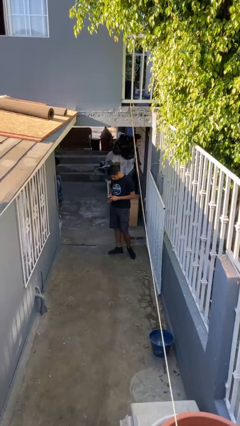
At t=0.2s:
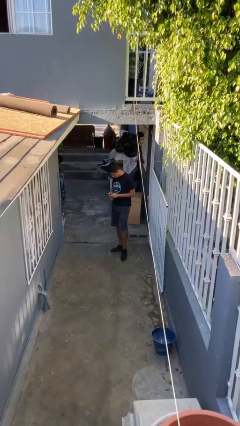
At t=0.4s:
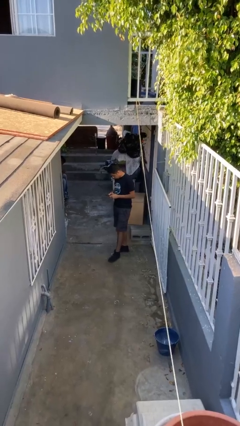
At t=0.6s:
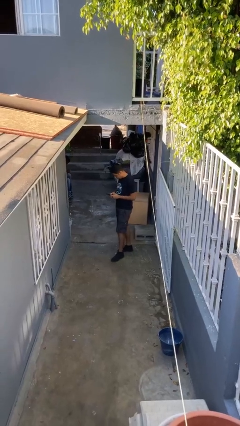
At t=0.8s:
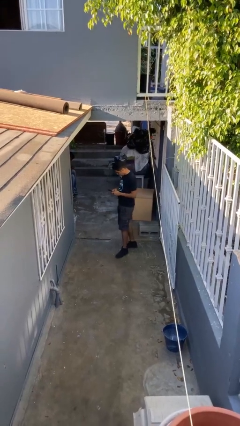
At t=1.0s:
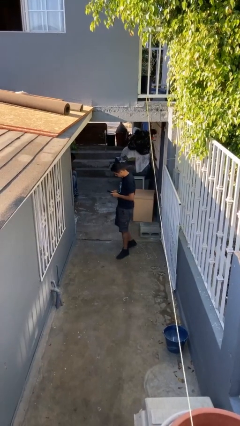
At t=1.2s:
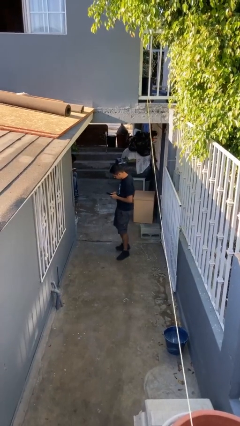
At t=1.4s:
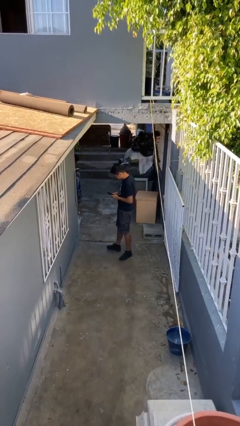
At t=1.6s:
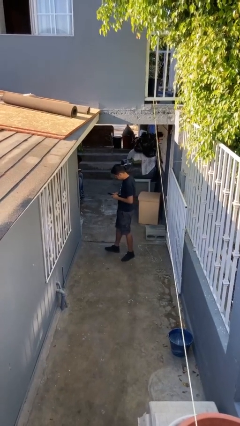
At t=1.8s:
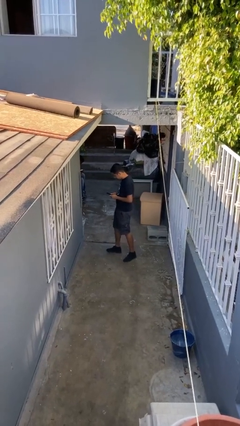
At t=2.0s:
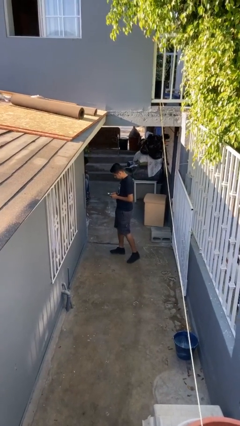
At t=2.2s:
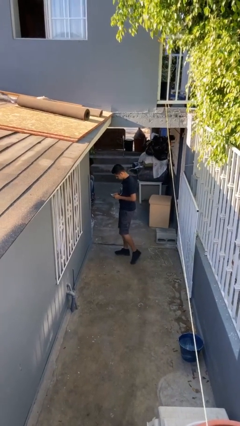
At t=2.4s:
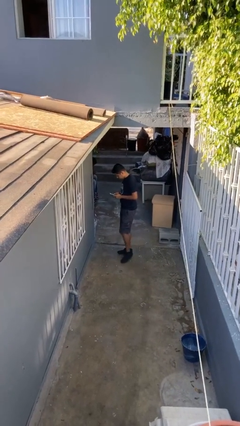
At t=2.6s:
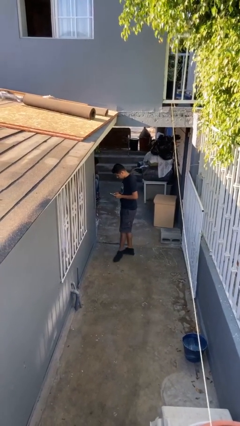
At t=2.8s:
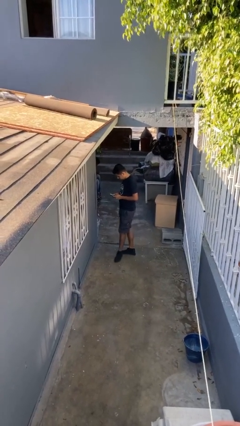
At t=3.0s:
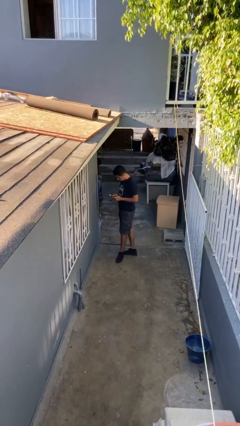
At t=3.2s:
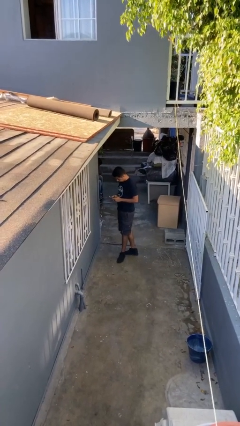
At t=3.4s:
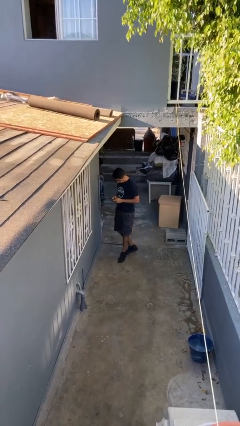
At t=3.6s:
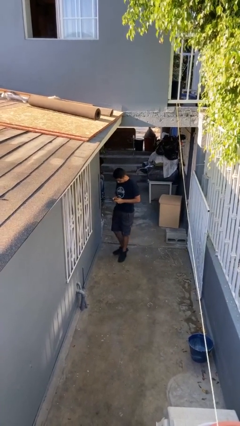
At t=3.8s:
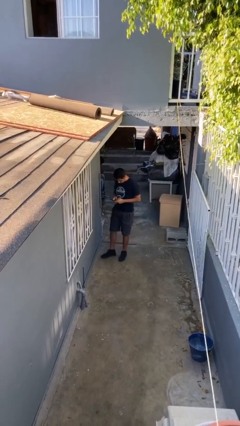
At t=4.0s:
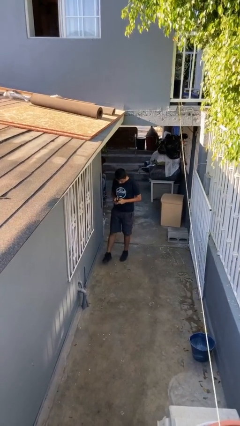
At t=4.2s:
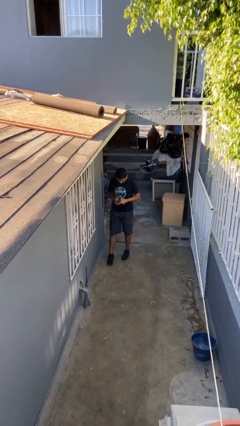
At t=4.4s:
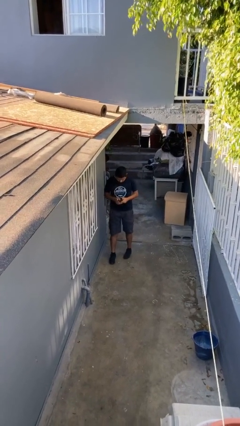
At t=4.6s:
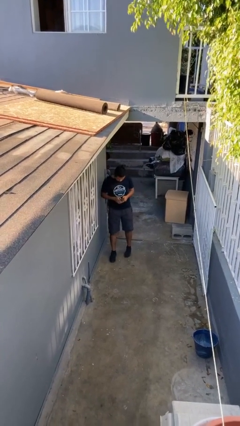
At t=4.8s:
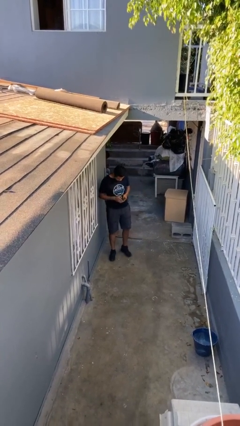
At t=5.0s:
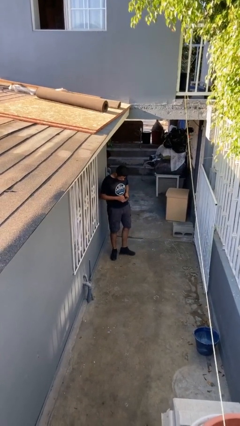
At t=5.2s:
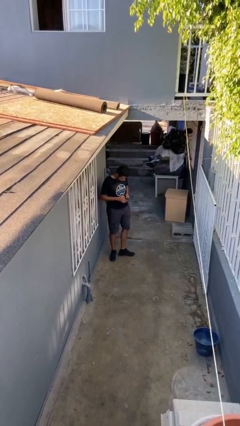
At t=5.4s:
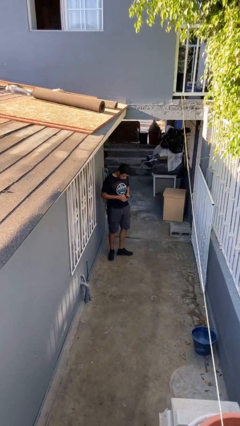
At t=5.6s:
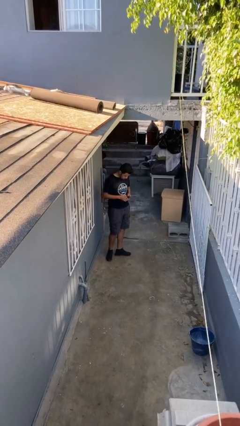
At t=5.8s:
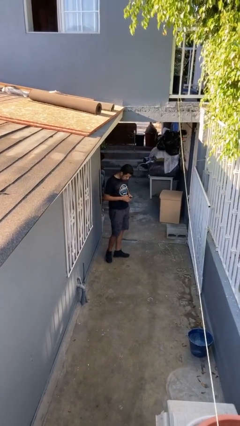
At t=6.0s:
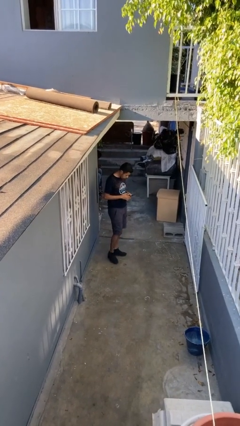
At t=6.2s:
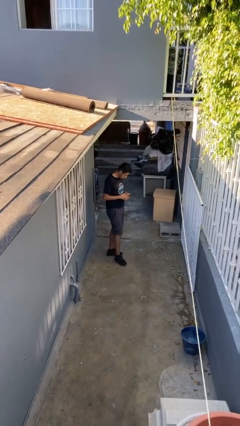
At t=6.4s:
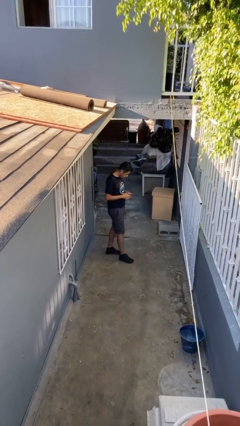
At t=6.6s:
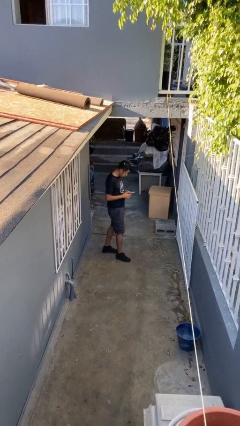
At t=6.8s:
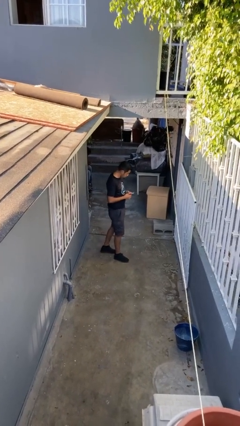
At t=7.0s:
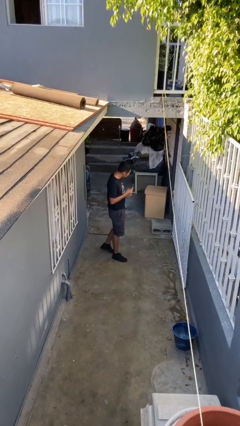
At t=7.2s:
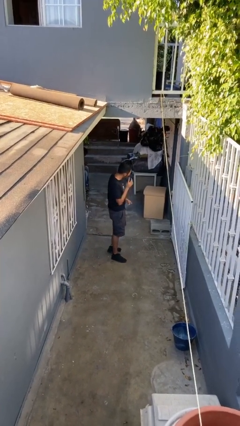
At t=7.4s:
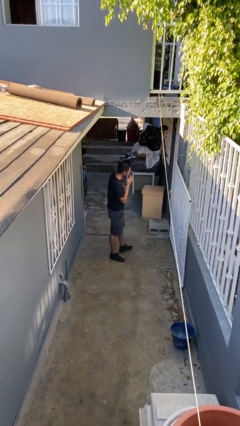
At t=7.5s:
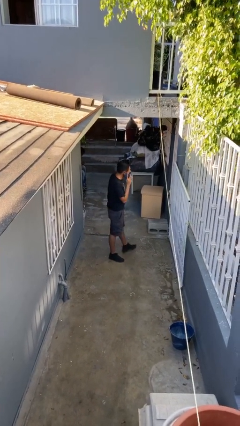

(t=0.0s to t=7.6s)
person texts on phone

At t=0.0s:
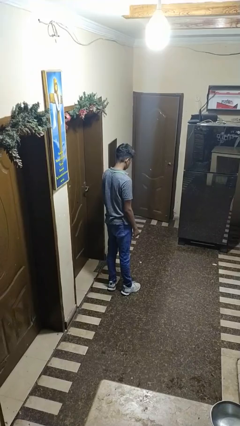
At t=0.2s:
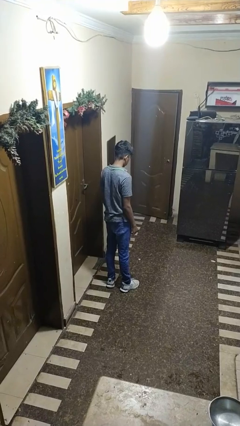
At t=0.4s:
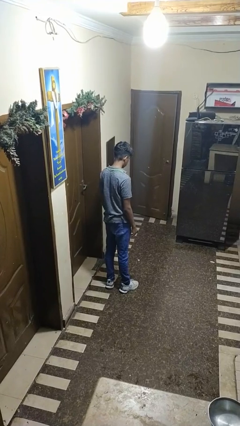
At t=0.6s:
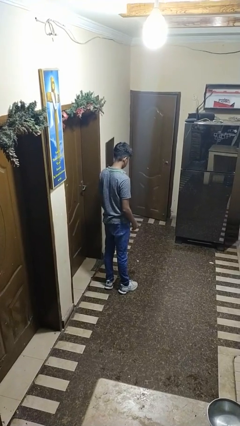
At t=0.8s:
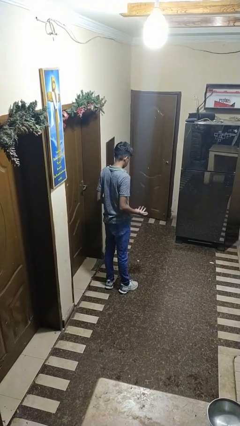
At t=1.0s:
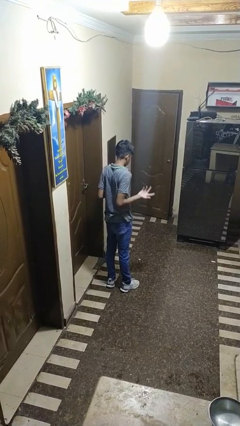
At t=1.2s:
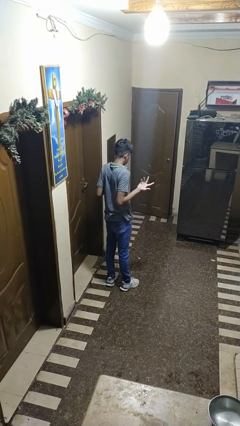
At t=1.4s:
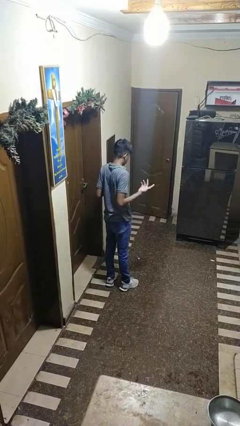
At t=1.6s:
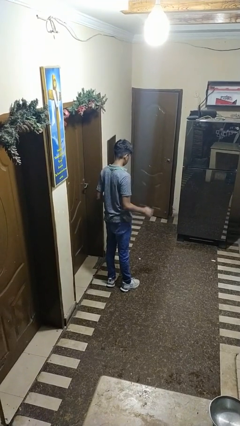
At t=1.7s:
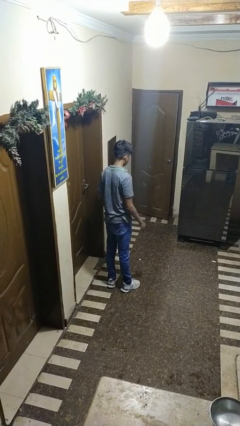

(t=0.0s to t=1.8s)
person shrugs

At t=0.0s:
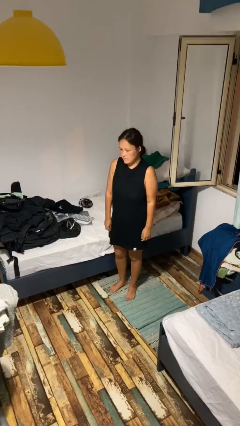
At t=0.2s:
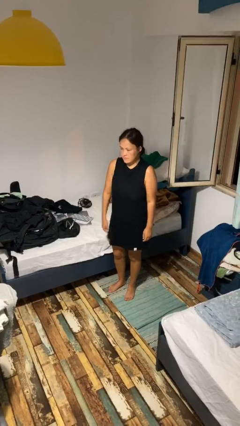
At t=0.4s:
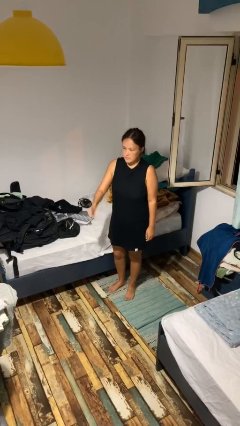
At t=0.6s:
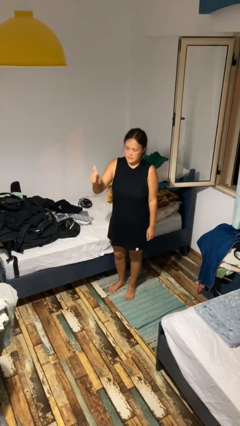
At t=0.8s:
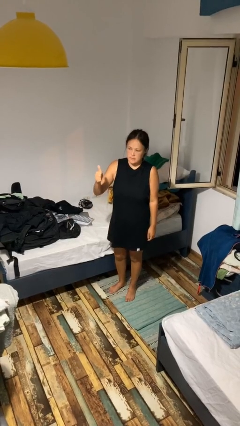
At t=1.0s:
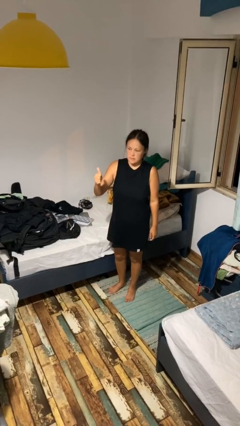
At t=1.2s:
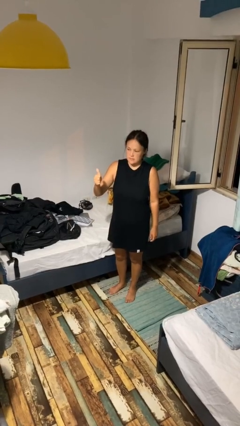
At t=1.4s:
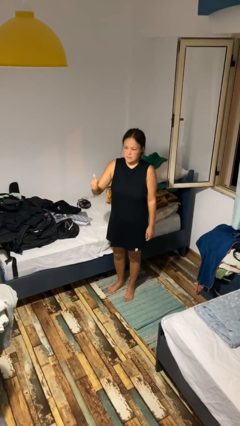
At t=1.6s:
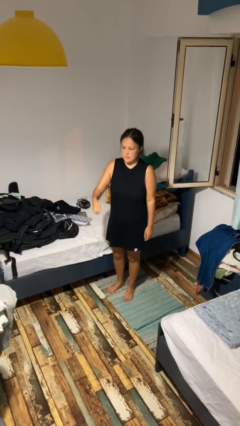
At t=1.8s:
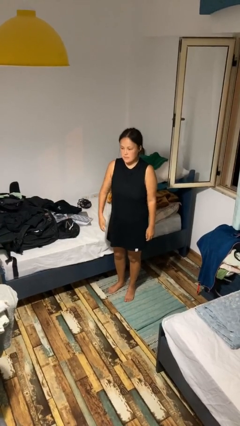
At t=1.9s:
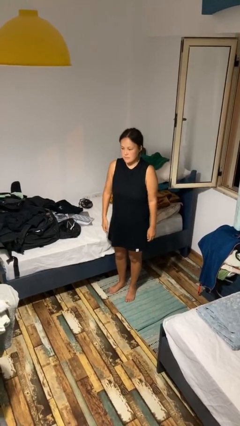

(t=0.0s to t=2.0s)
person gestures thumbs up

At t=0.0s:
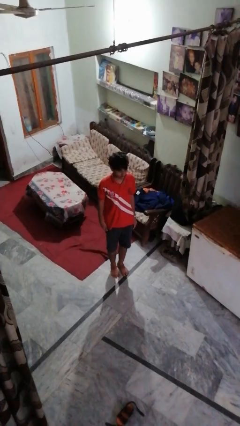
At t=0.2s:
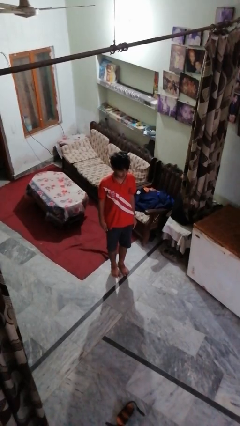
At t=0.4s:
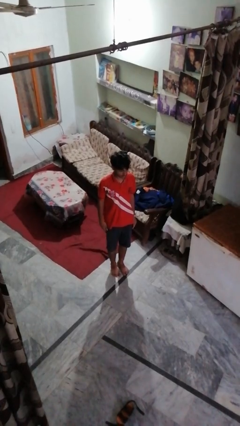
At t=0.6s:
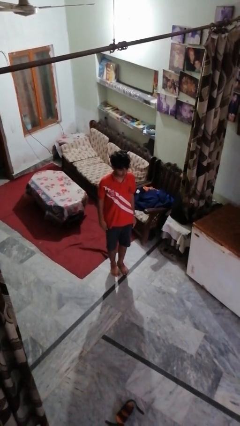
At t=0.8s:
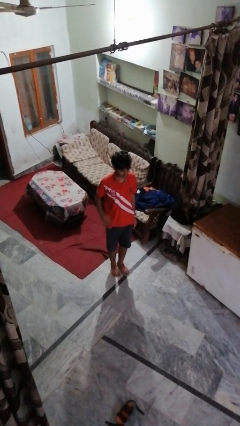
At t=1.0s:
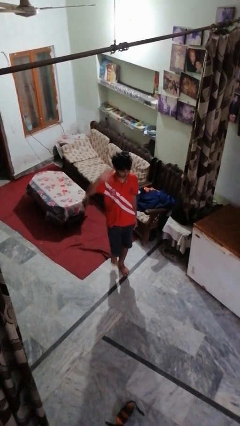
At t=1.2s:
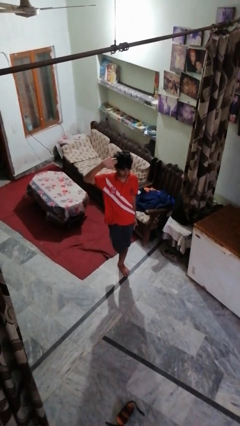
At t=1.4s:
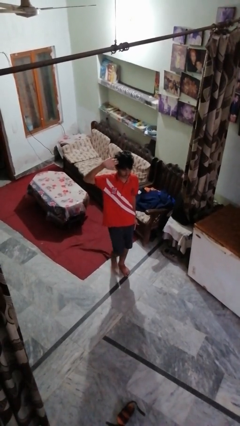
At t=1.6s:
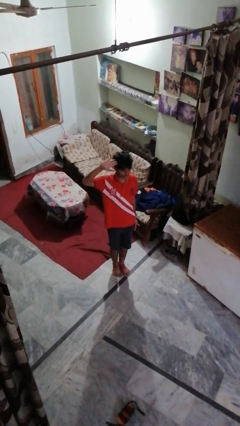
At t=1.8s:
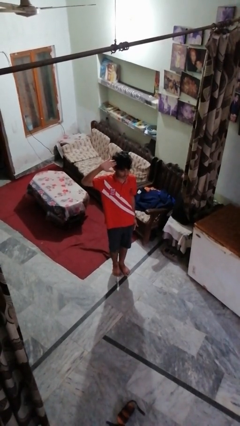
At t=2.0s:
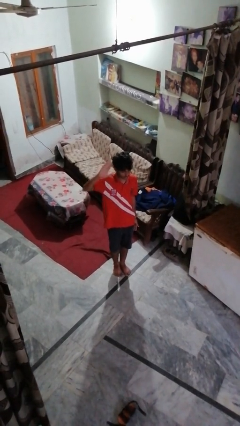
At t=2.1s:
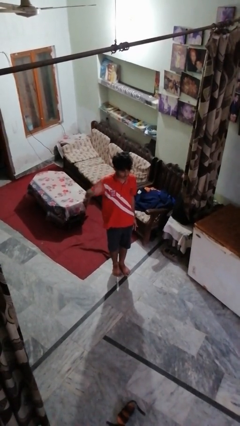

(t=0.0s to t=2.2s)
person salutes

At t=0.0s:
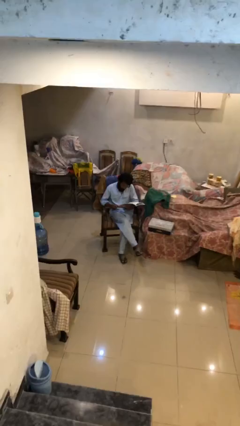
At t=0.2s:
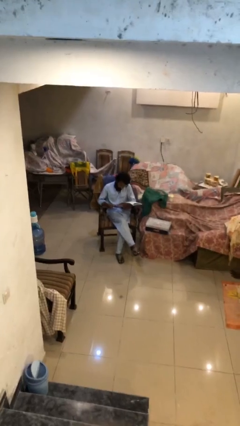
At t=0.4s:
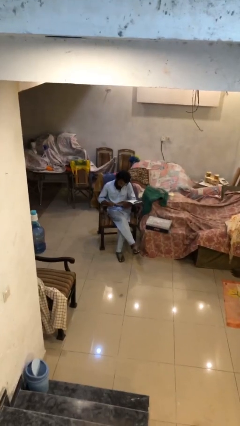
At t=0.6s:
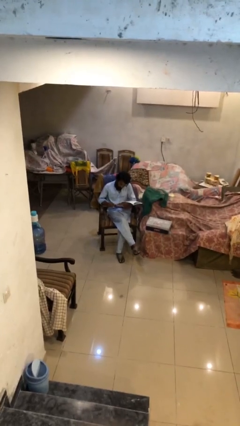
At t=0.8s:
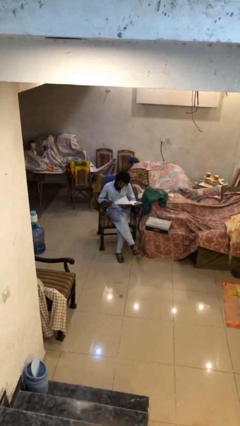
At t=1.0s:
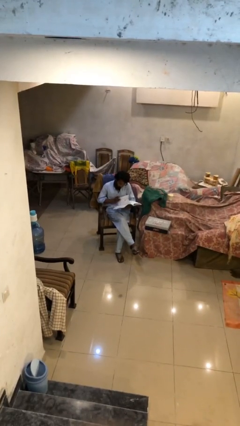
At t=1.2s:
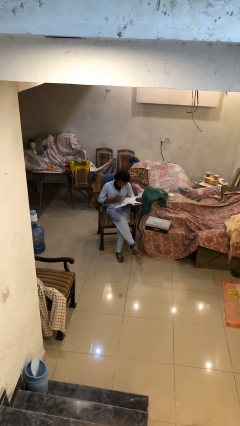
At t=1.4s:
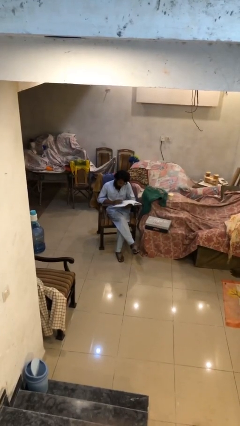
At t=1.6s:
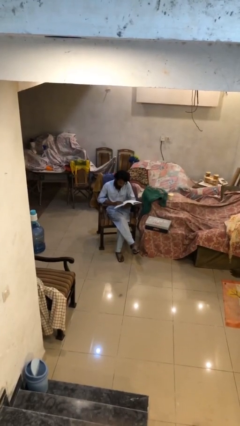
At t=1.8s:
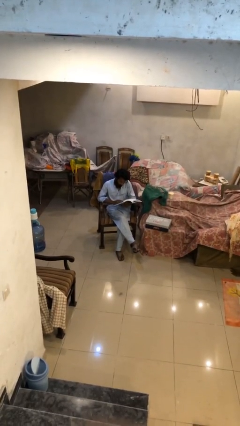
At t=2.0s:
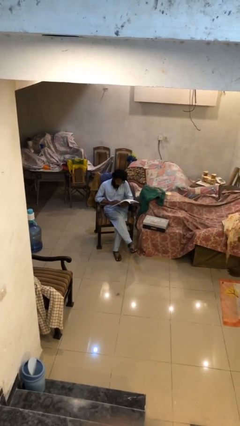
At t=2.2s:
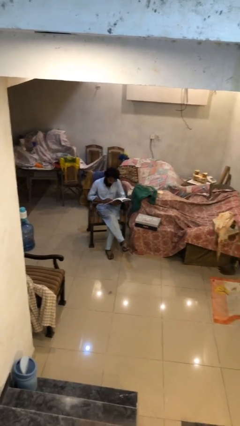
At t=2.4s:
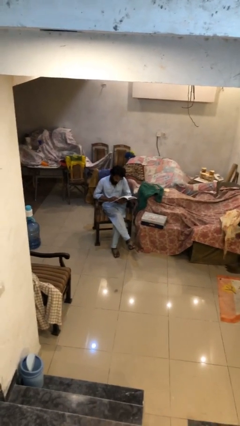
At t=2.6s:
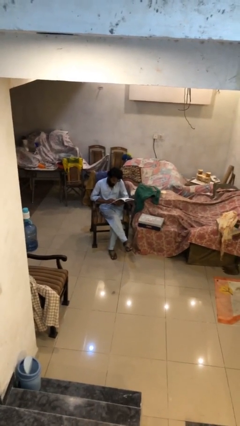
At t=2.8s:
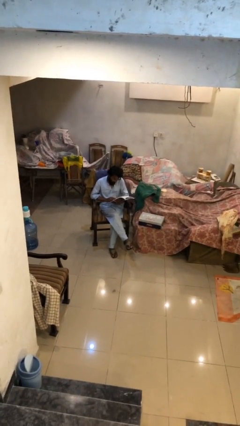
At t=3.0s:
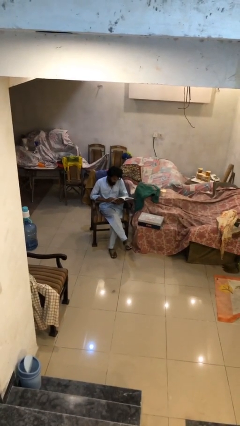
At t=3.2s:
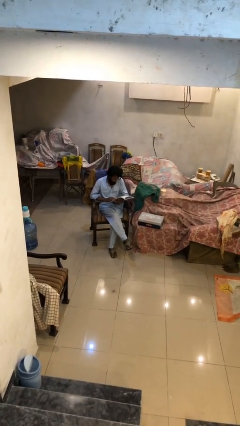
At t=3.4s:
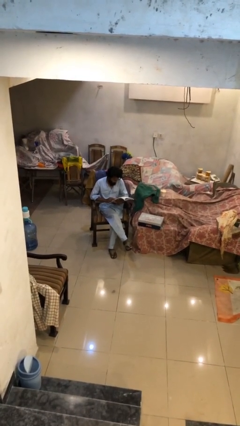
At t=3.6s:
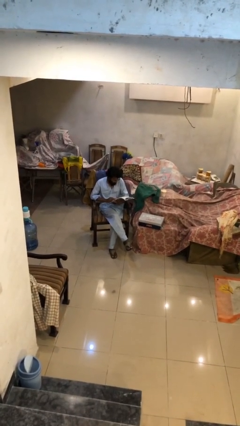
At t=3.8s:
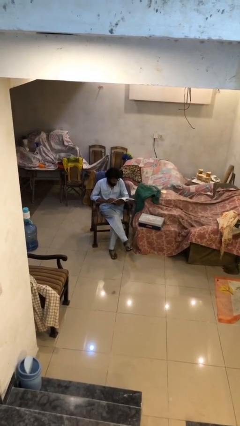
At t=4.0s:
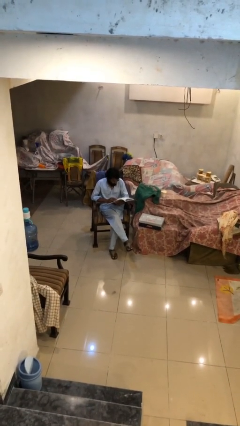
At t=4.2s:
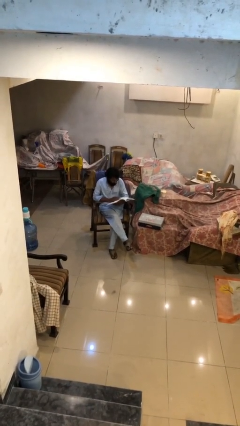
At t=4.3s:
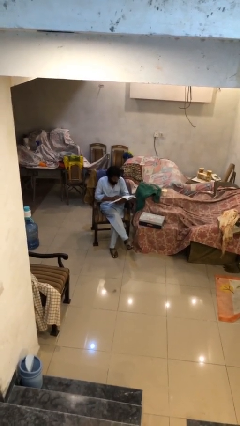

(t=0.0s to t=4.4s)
person reads document
